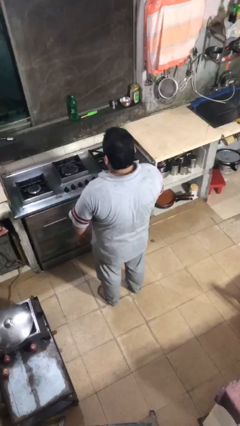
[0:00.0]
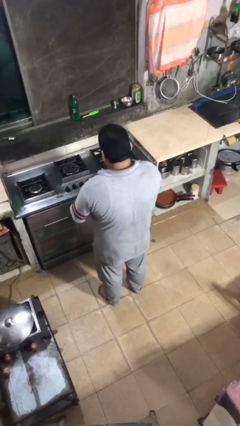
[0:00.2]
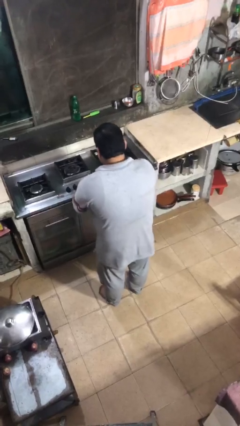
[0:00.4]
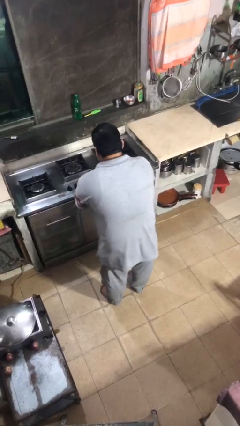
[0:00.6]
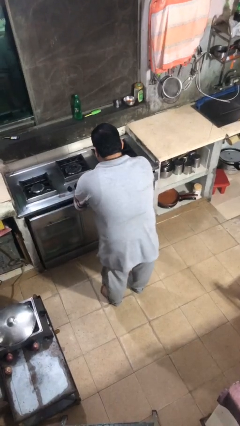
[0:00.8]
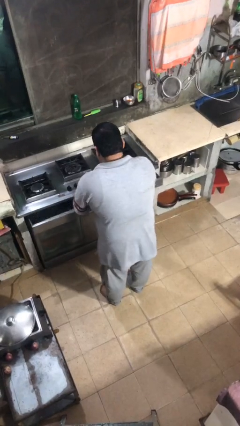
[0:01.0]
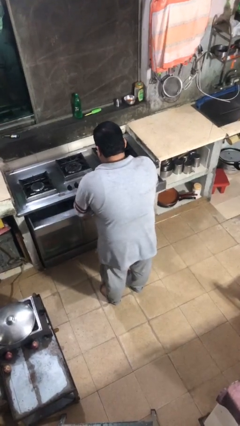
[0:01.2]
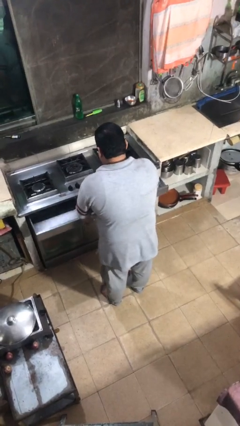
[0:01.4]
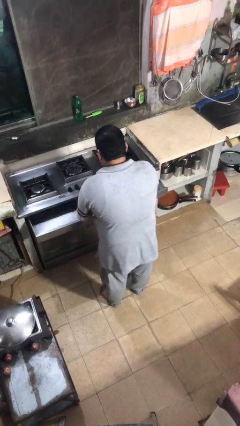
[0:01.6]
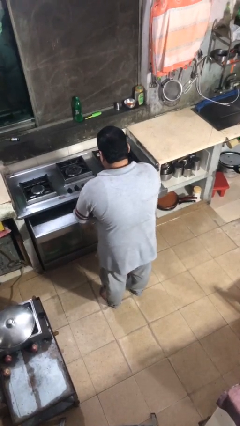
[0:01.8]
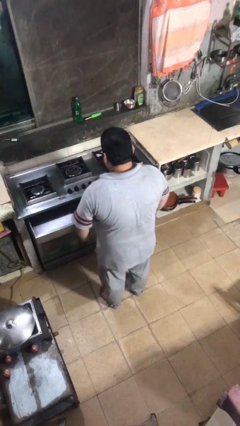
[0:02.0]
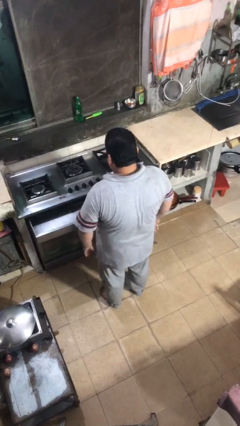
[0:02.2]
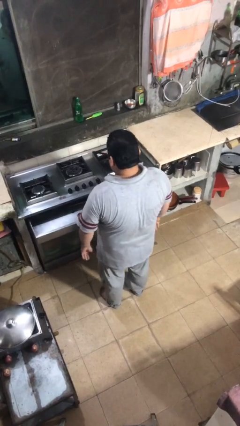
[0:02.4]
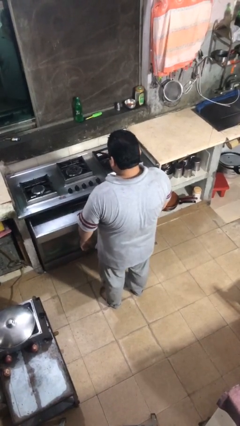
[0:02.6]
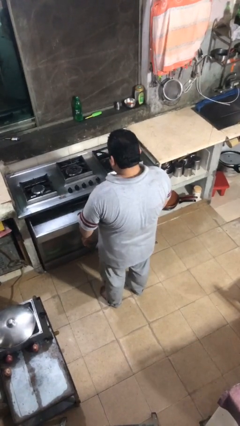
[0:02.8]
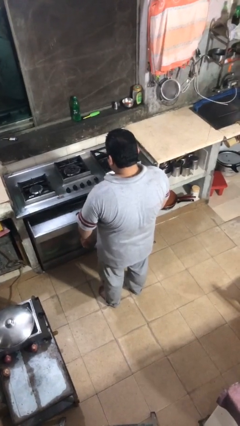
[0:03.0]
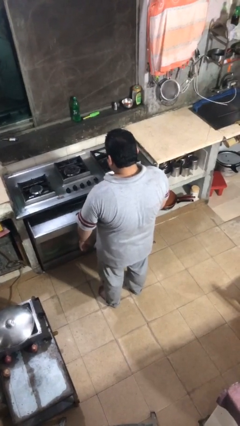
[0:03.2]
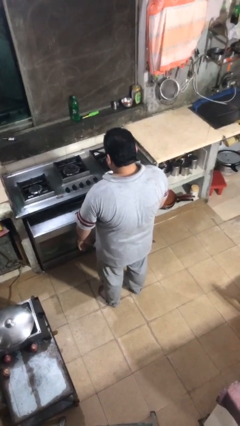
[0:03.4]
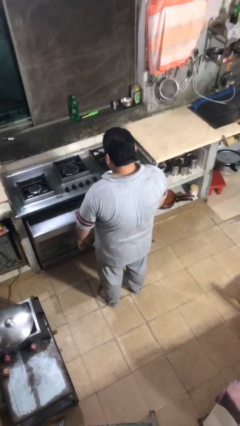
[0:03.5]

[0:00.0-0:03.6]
person opens kitchen drawer

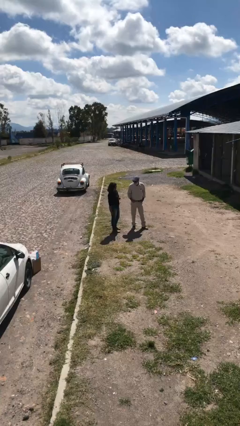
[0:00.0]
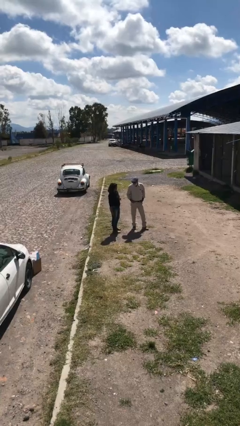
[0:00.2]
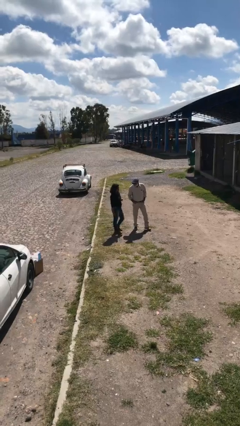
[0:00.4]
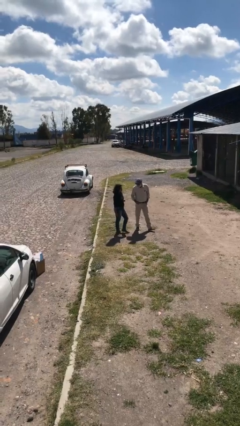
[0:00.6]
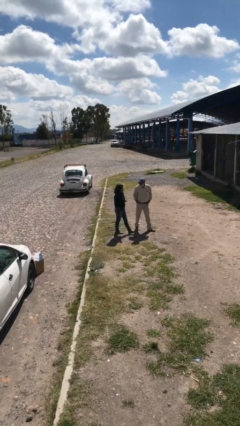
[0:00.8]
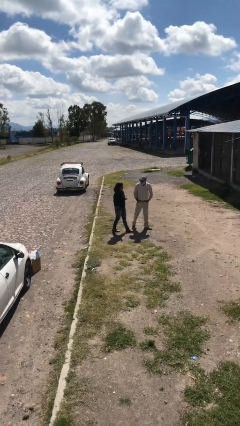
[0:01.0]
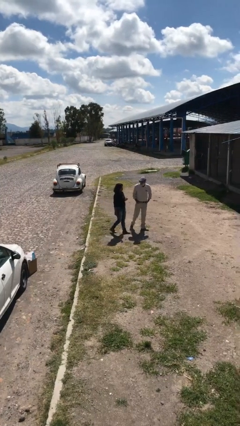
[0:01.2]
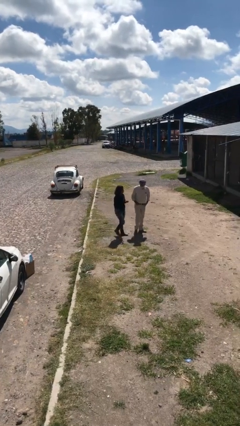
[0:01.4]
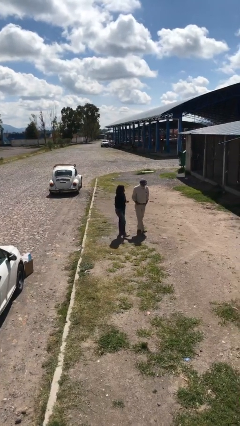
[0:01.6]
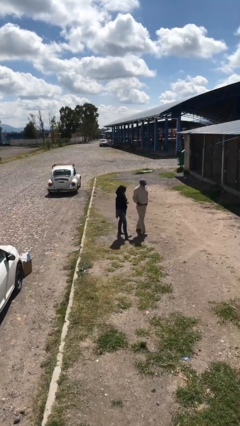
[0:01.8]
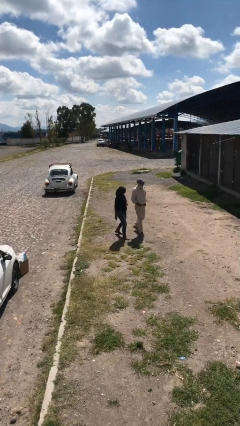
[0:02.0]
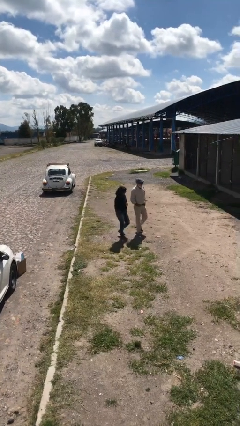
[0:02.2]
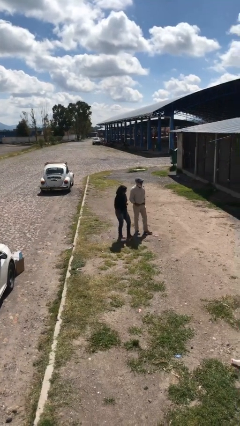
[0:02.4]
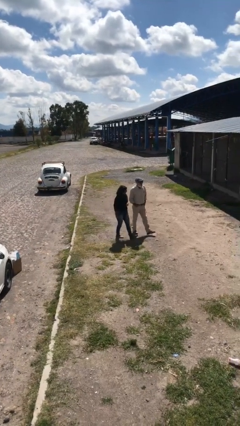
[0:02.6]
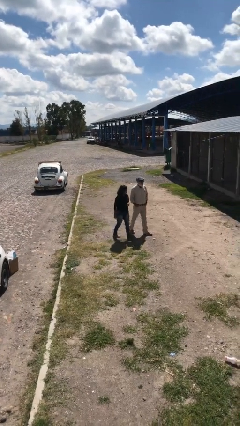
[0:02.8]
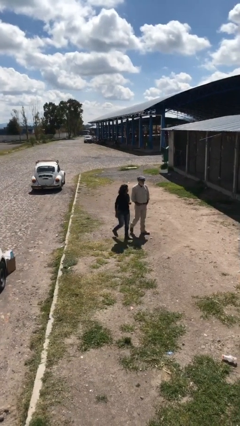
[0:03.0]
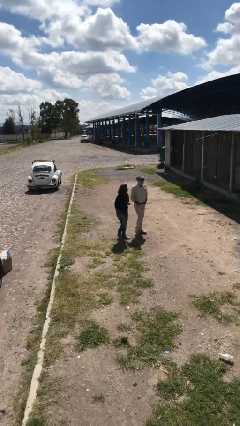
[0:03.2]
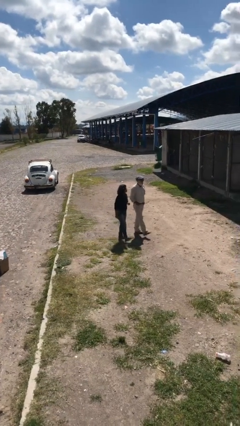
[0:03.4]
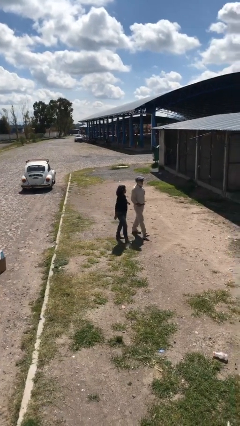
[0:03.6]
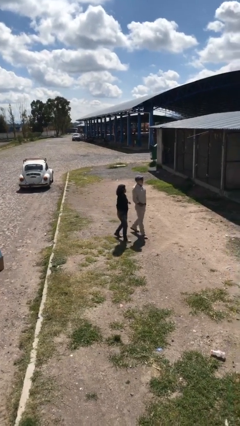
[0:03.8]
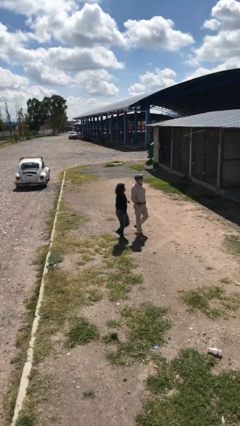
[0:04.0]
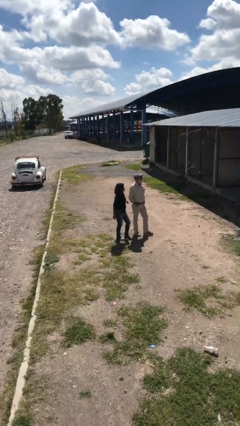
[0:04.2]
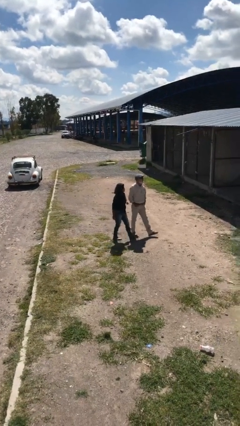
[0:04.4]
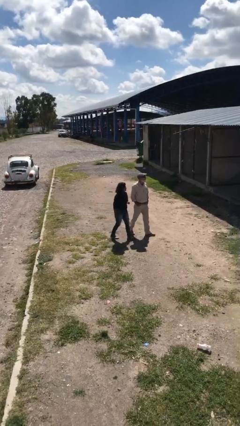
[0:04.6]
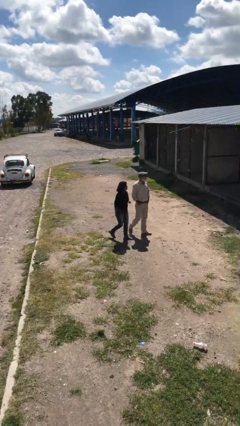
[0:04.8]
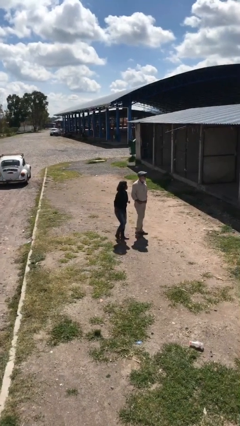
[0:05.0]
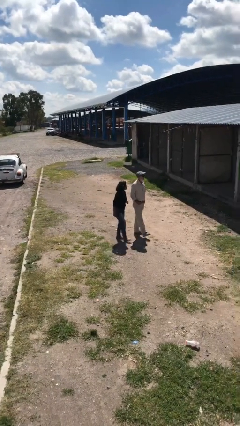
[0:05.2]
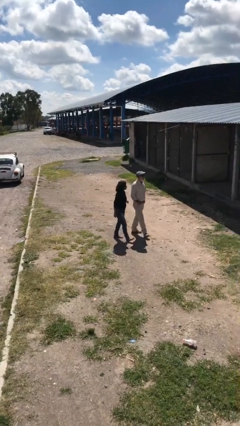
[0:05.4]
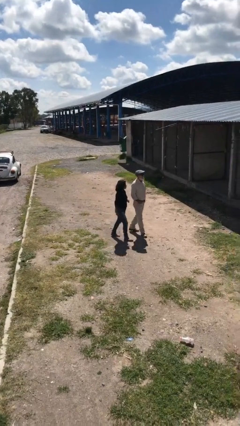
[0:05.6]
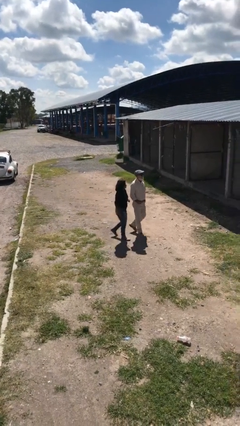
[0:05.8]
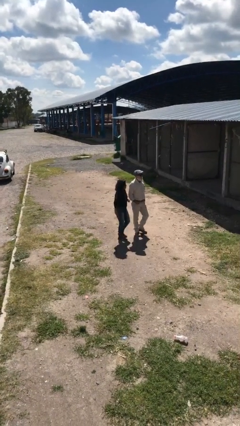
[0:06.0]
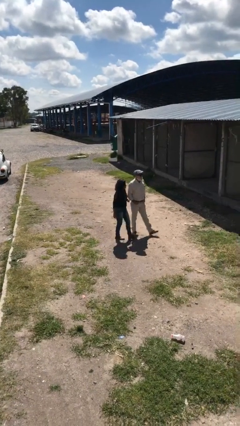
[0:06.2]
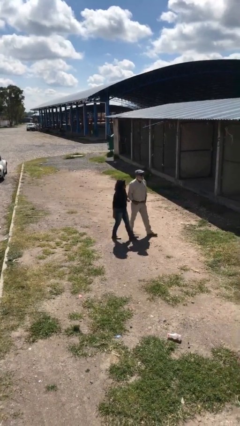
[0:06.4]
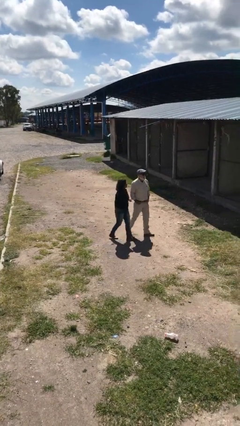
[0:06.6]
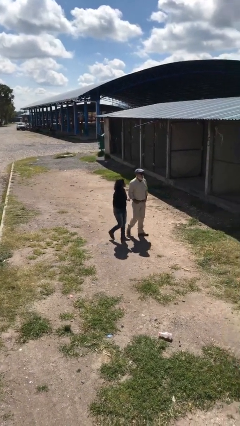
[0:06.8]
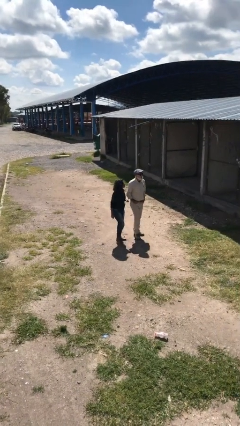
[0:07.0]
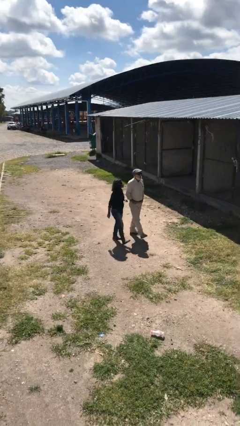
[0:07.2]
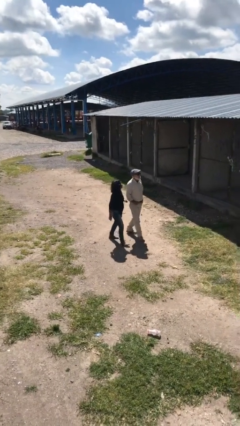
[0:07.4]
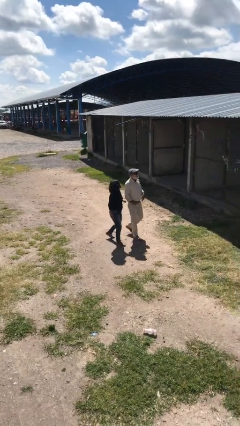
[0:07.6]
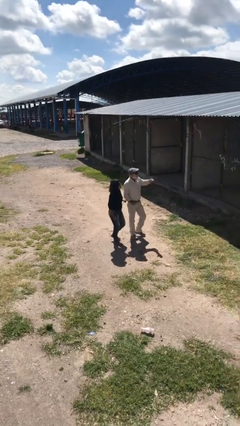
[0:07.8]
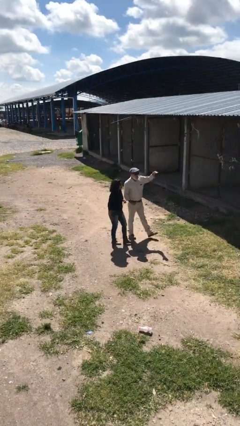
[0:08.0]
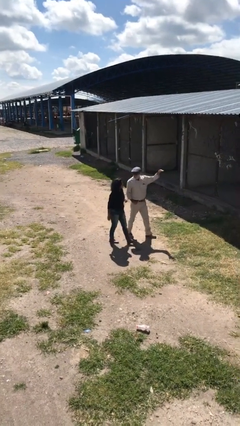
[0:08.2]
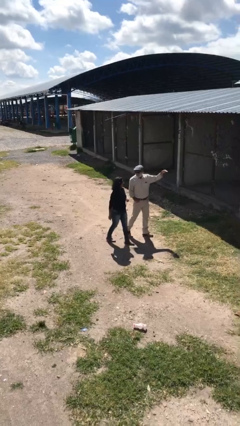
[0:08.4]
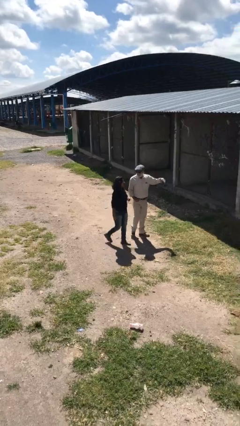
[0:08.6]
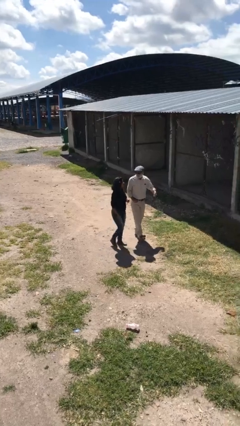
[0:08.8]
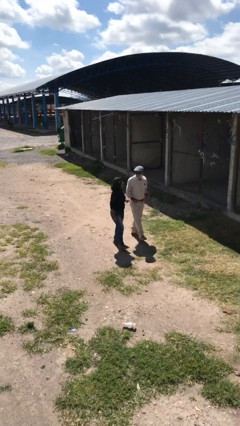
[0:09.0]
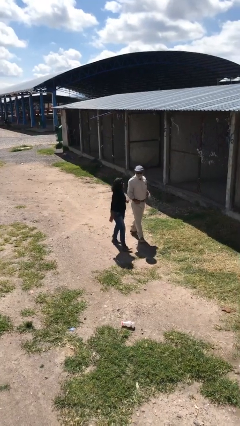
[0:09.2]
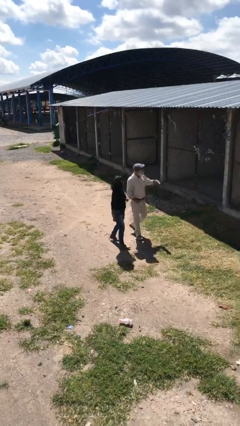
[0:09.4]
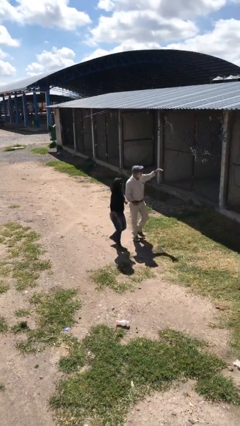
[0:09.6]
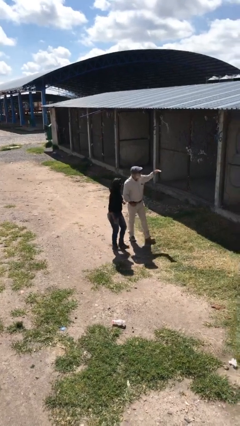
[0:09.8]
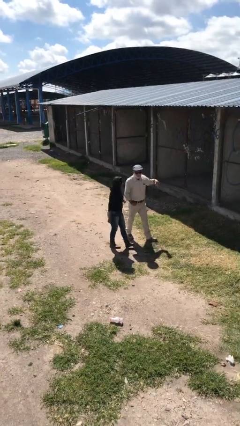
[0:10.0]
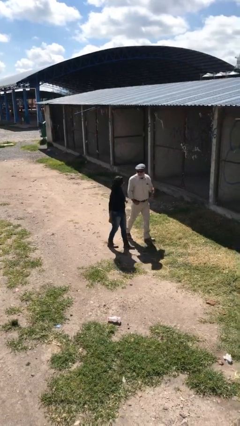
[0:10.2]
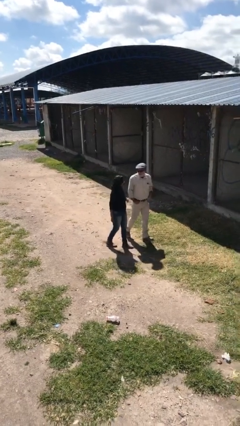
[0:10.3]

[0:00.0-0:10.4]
person talks to person

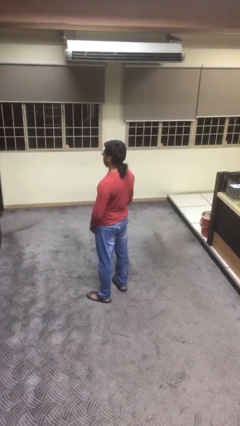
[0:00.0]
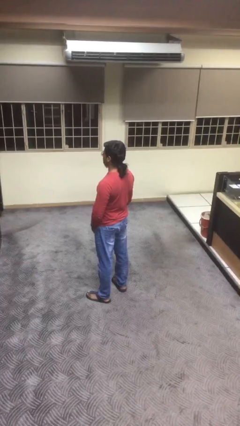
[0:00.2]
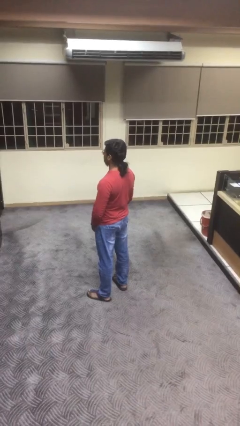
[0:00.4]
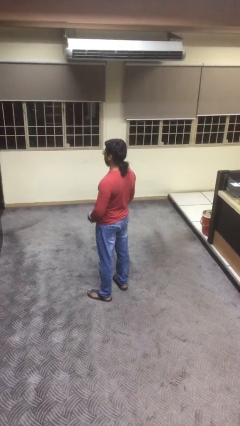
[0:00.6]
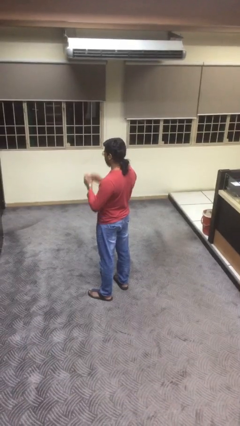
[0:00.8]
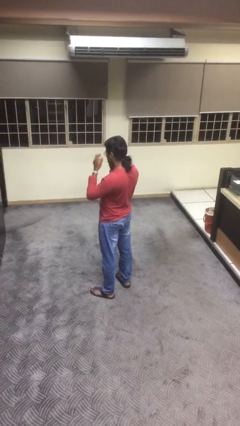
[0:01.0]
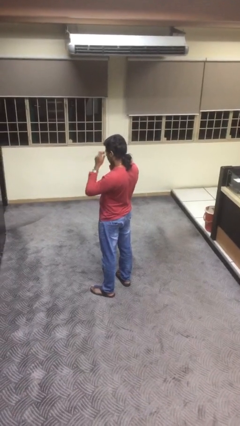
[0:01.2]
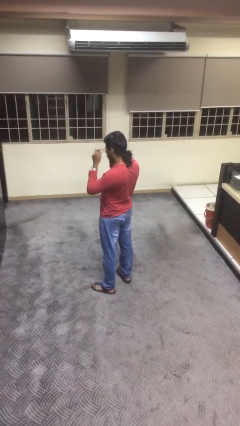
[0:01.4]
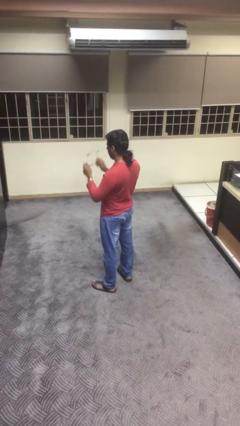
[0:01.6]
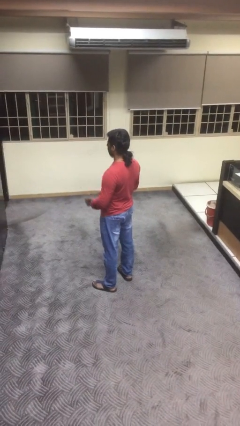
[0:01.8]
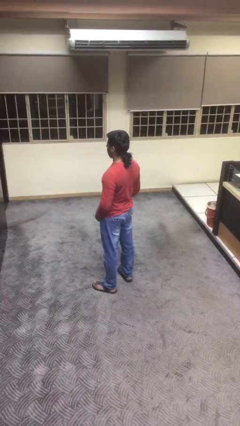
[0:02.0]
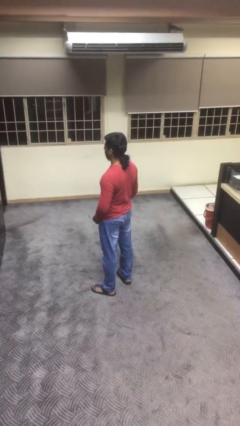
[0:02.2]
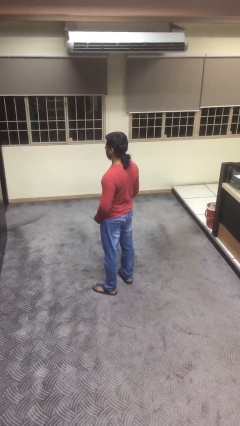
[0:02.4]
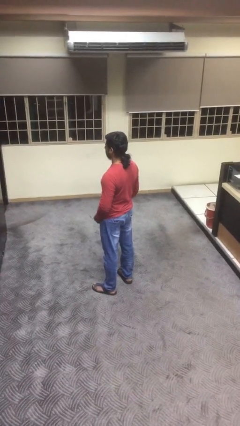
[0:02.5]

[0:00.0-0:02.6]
person takes off glasses

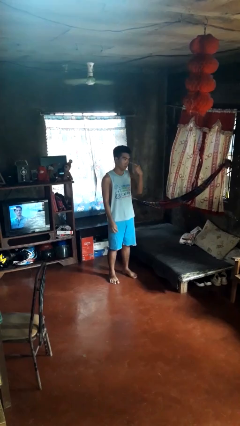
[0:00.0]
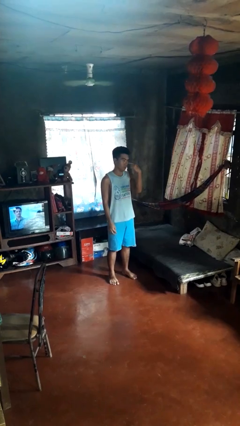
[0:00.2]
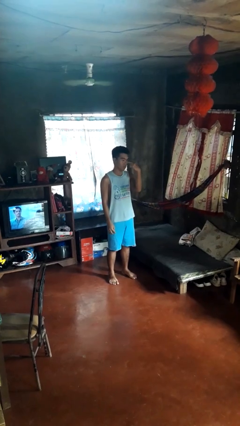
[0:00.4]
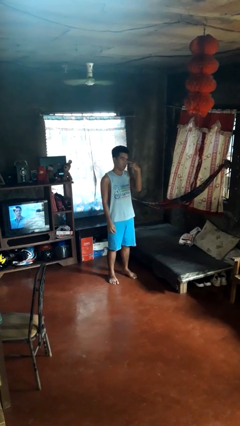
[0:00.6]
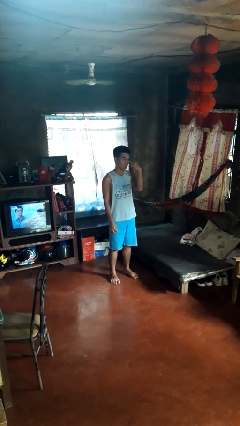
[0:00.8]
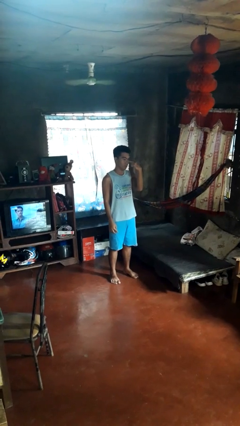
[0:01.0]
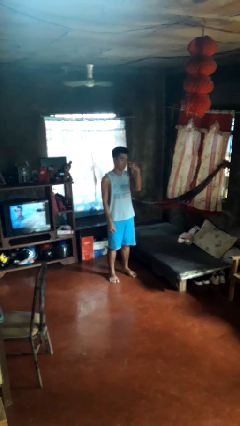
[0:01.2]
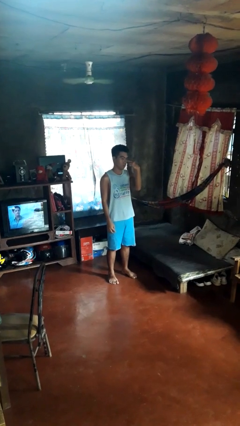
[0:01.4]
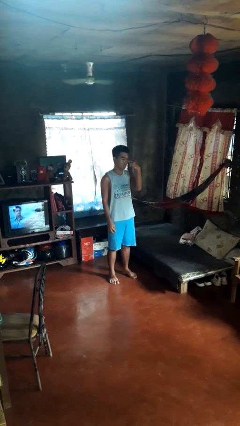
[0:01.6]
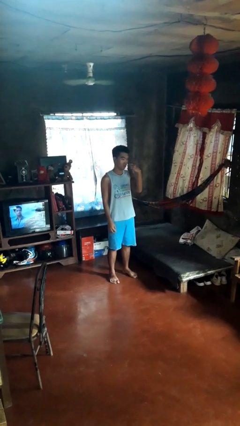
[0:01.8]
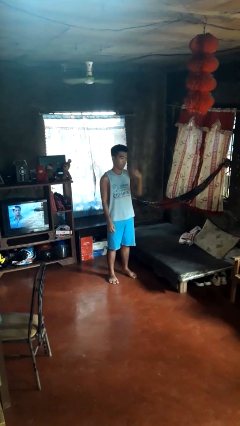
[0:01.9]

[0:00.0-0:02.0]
person gestures watch closely
